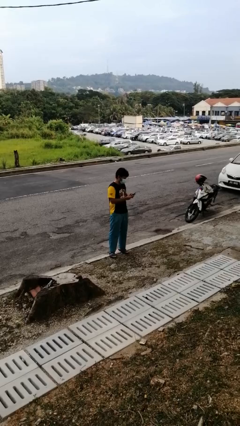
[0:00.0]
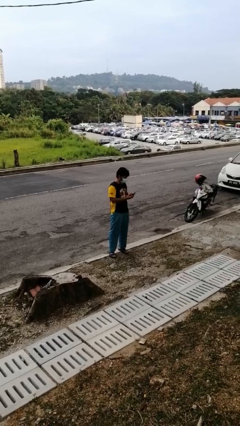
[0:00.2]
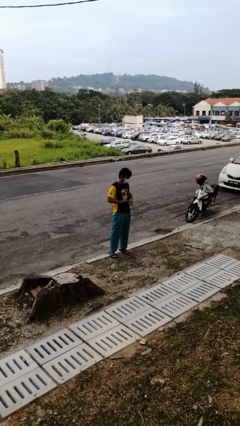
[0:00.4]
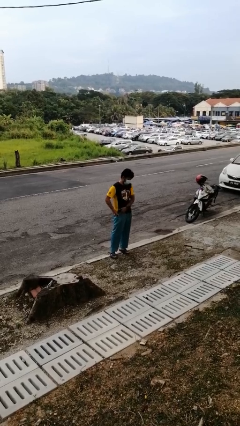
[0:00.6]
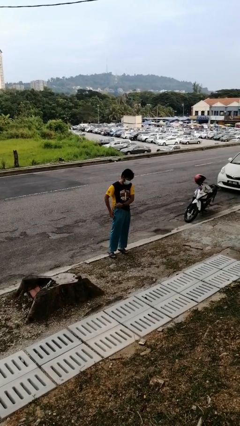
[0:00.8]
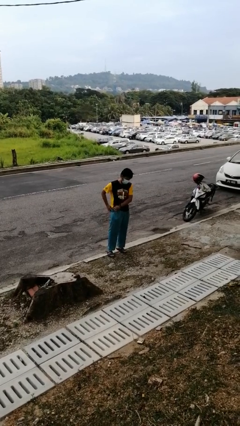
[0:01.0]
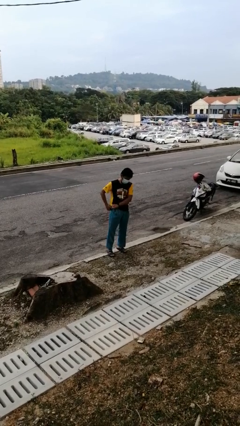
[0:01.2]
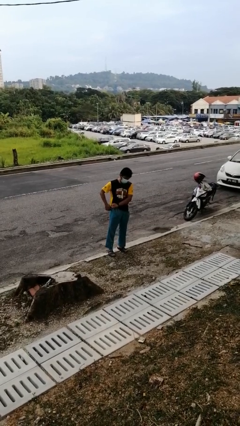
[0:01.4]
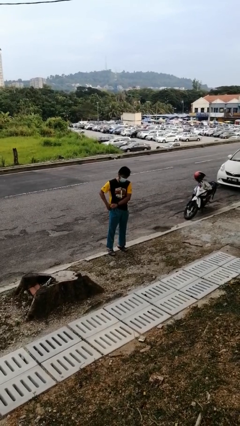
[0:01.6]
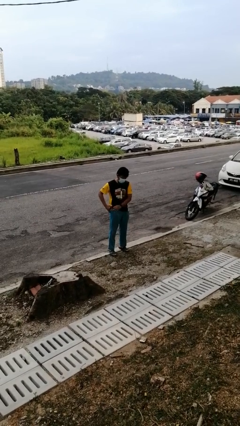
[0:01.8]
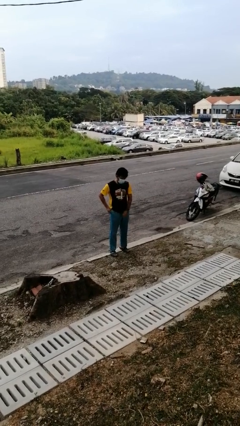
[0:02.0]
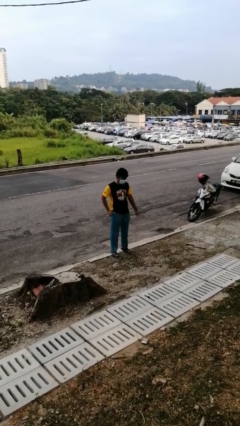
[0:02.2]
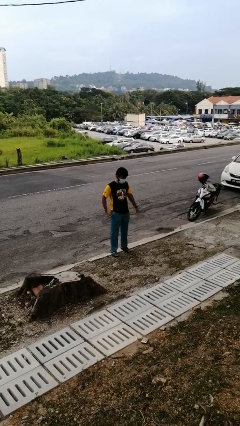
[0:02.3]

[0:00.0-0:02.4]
person puts phone into pocket

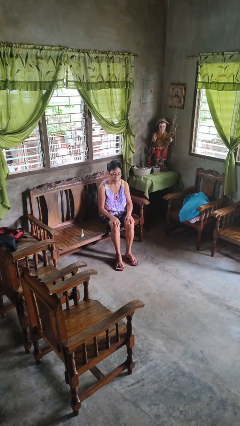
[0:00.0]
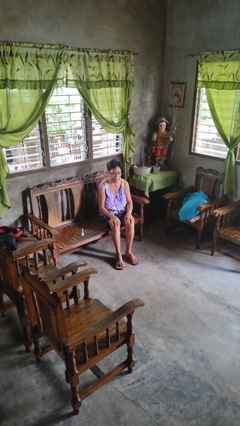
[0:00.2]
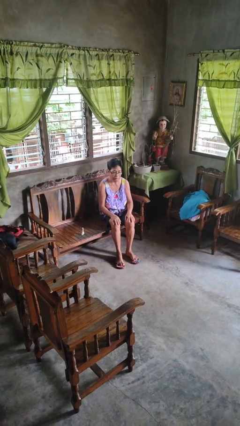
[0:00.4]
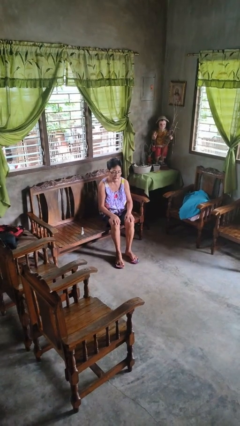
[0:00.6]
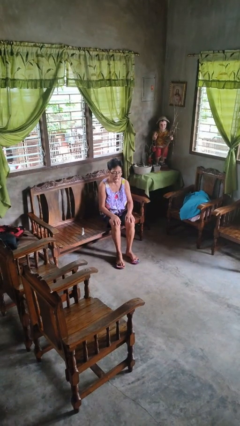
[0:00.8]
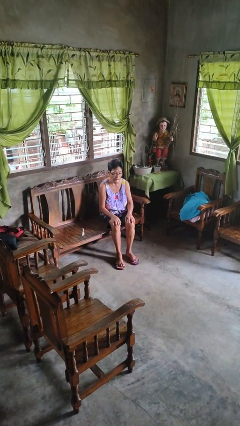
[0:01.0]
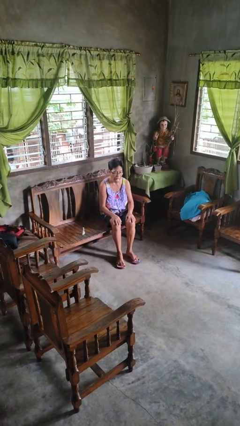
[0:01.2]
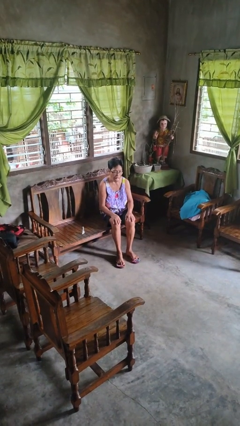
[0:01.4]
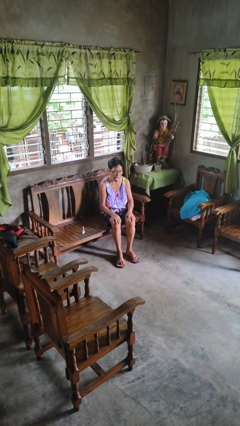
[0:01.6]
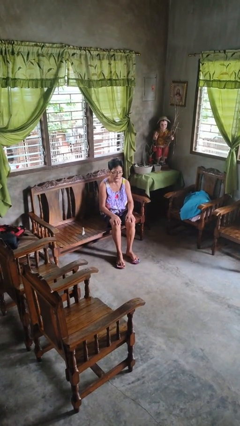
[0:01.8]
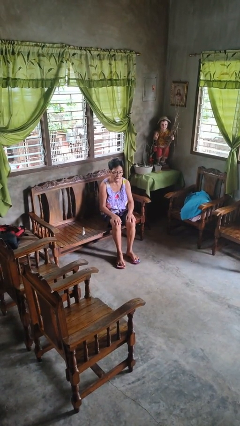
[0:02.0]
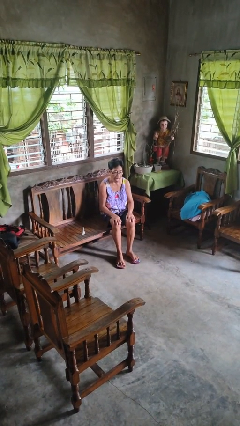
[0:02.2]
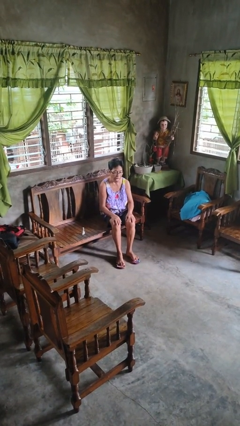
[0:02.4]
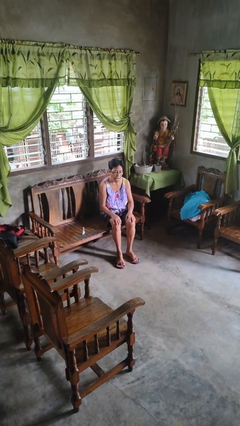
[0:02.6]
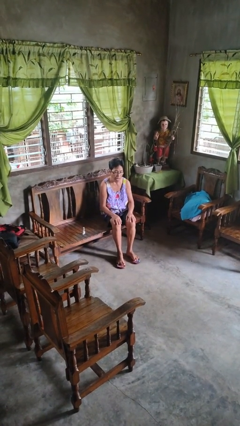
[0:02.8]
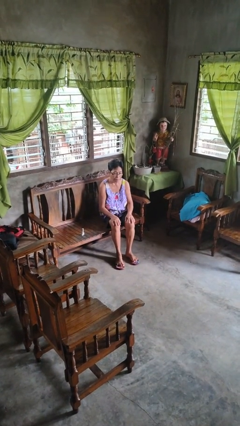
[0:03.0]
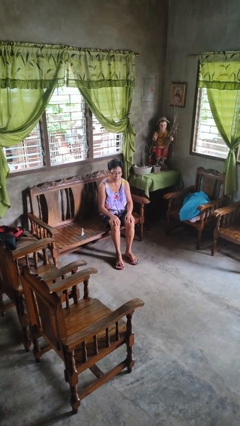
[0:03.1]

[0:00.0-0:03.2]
person sticks out tongue

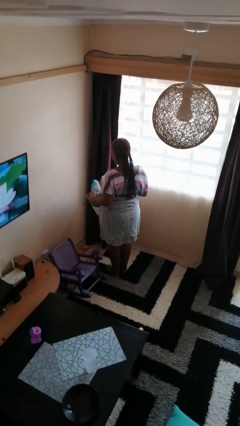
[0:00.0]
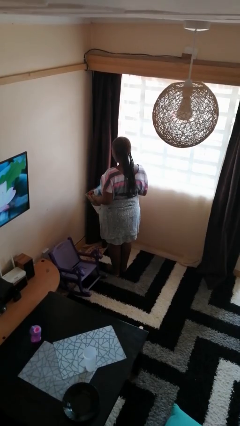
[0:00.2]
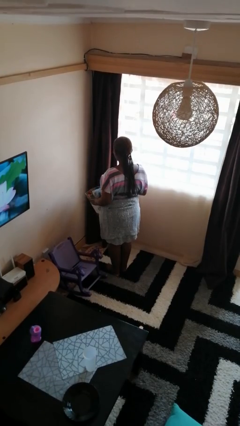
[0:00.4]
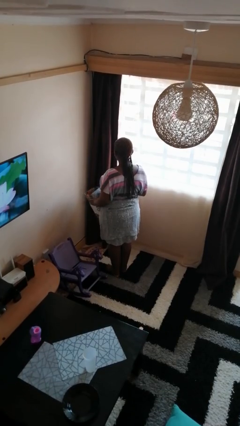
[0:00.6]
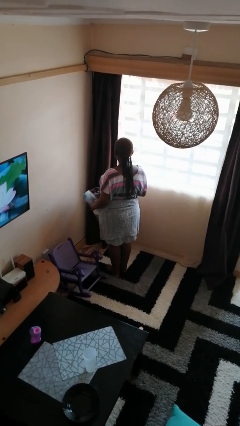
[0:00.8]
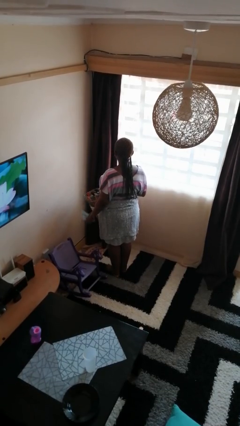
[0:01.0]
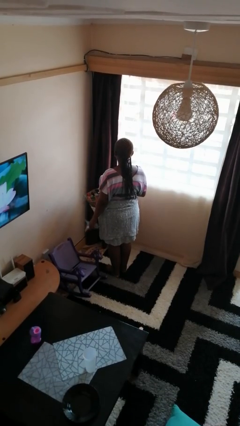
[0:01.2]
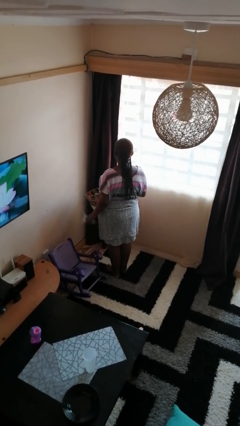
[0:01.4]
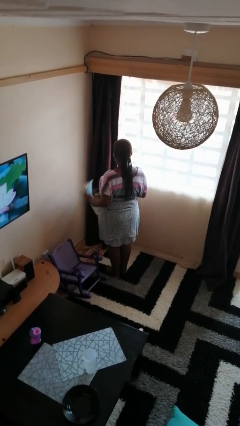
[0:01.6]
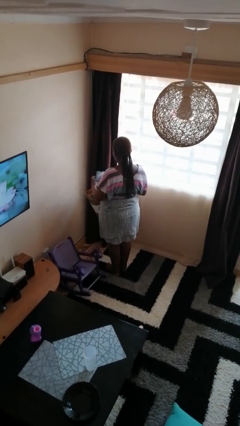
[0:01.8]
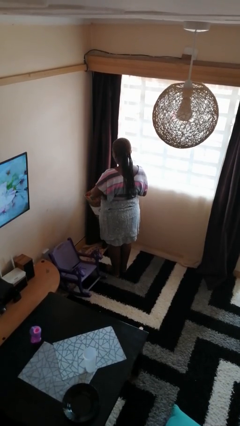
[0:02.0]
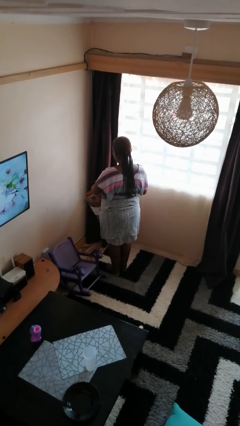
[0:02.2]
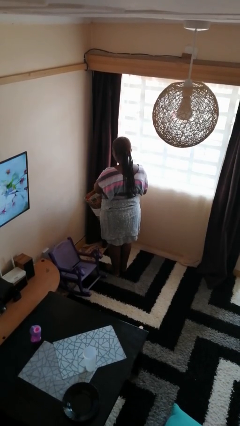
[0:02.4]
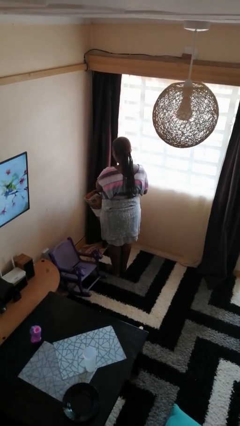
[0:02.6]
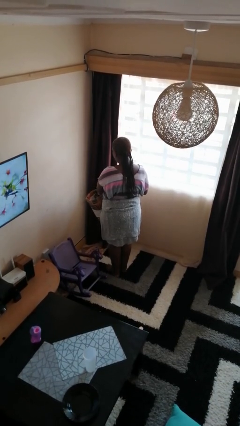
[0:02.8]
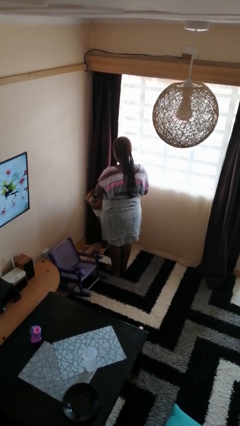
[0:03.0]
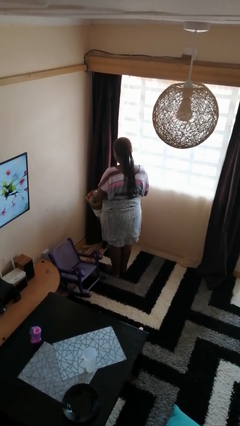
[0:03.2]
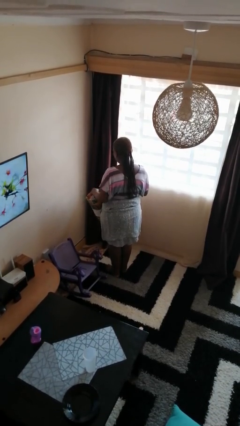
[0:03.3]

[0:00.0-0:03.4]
person puts object into bag

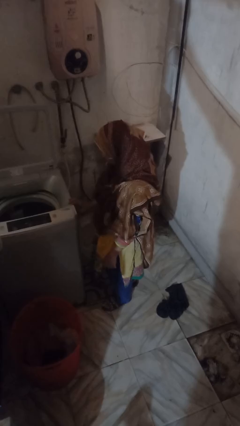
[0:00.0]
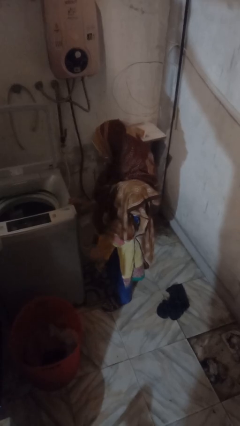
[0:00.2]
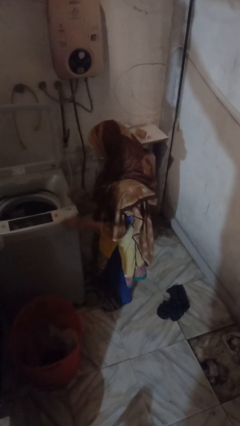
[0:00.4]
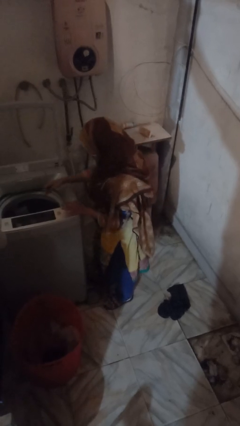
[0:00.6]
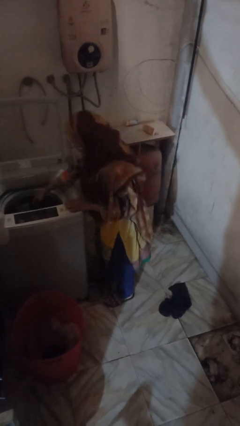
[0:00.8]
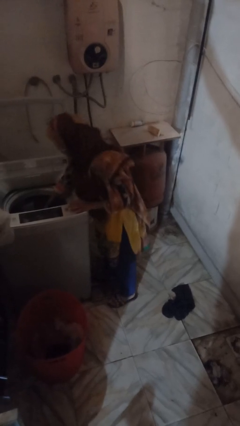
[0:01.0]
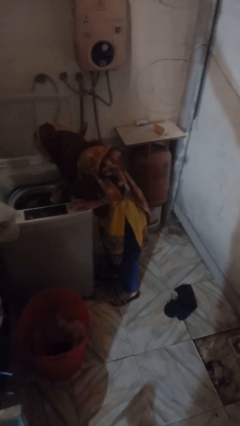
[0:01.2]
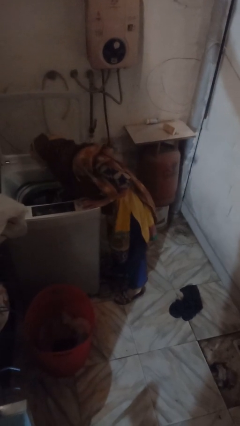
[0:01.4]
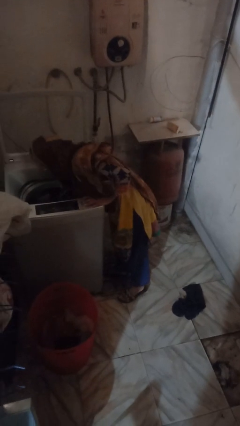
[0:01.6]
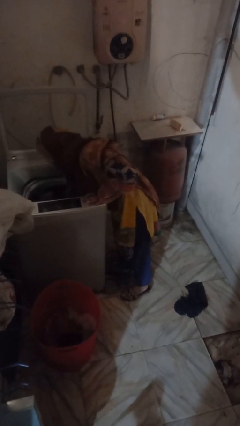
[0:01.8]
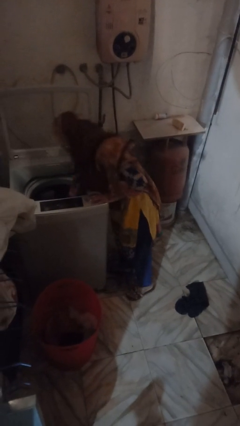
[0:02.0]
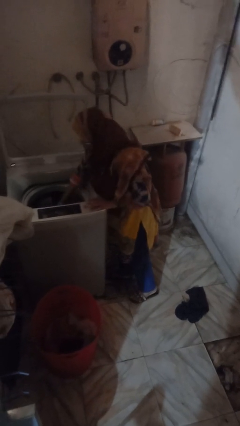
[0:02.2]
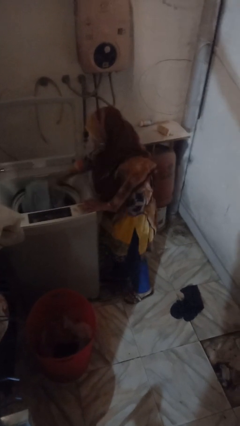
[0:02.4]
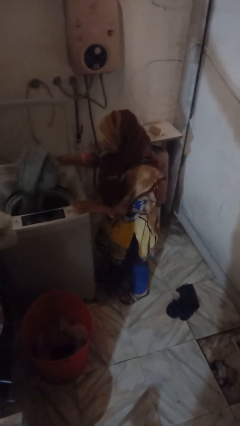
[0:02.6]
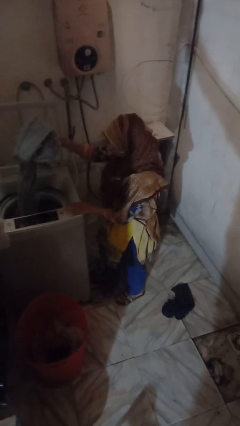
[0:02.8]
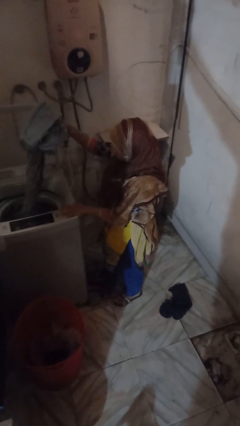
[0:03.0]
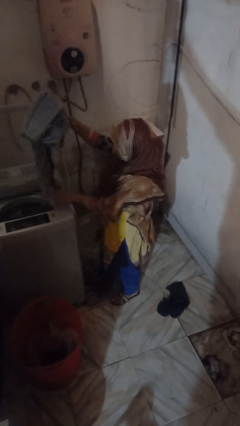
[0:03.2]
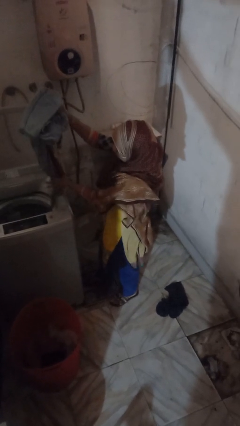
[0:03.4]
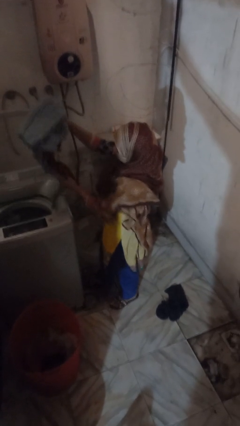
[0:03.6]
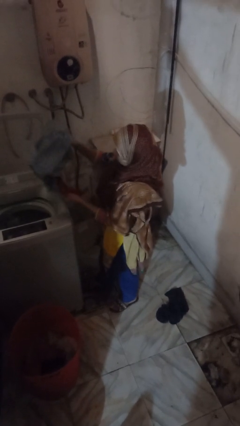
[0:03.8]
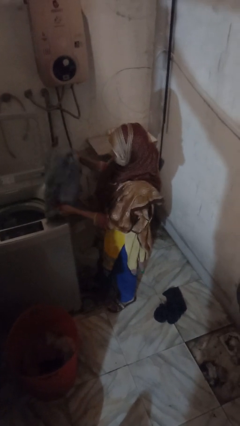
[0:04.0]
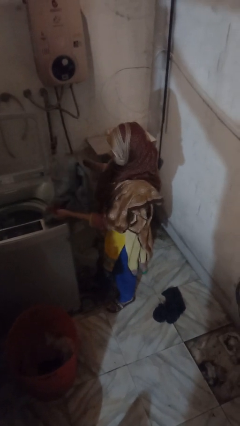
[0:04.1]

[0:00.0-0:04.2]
person unloads dryer

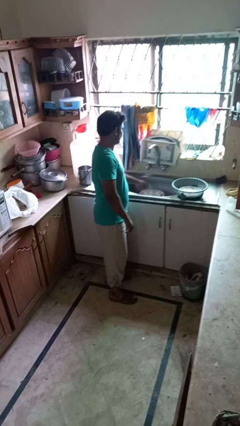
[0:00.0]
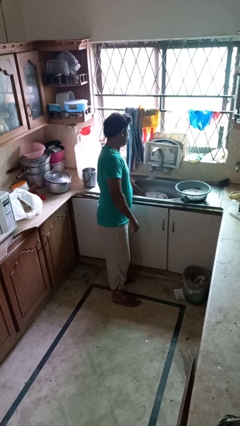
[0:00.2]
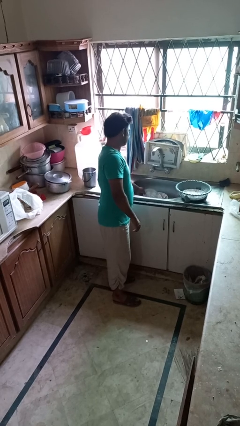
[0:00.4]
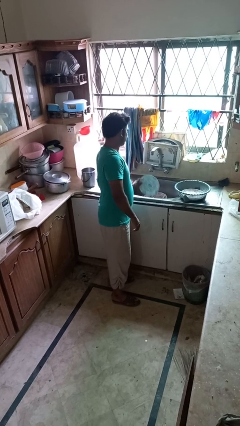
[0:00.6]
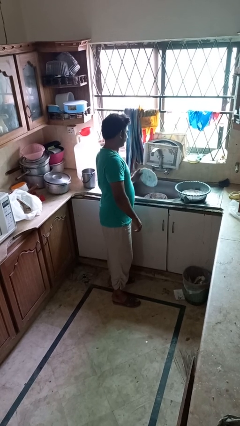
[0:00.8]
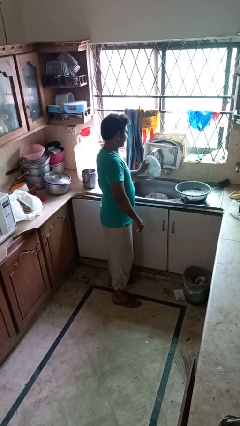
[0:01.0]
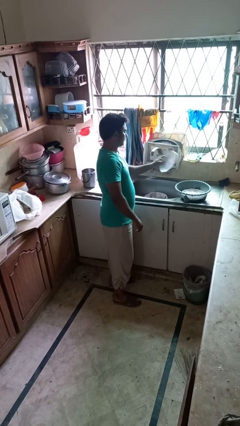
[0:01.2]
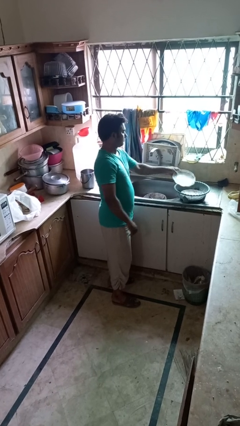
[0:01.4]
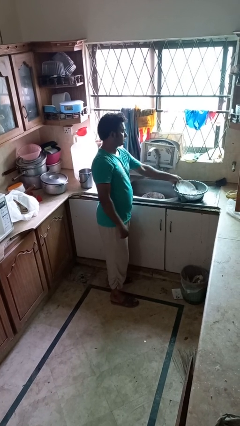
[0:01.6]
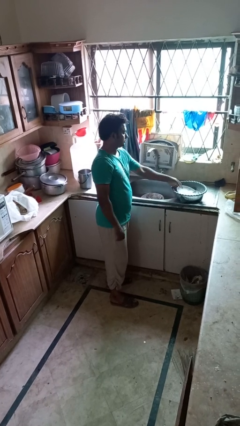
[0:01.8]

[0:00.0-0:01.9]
person loads dishwasher

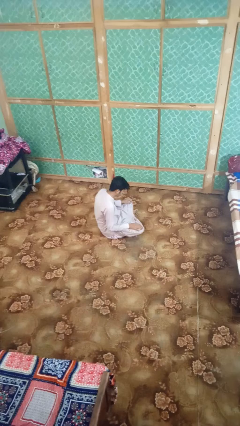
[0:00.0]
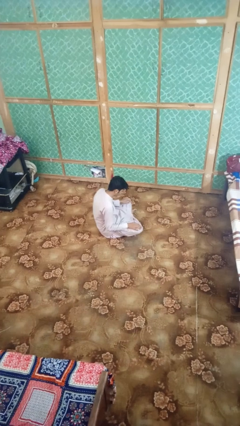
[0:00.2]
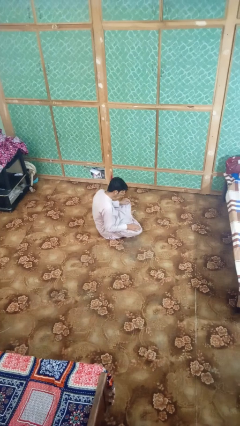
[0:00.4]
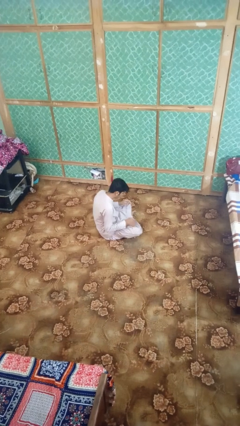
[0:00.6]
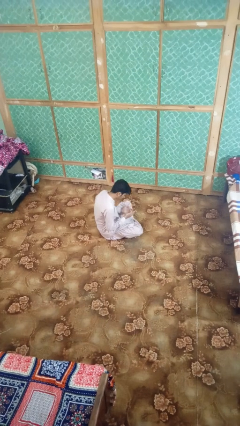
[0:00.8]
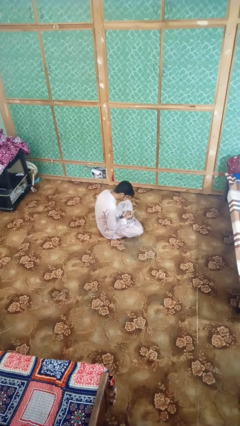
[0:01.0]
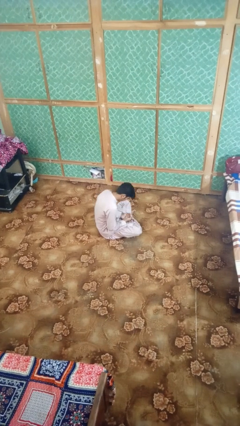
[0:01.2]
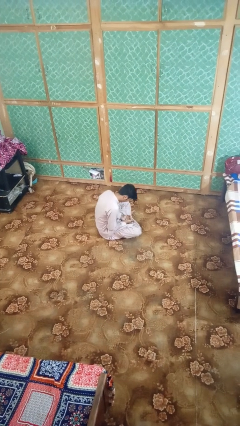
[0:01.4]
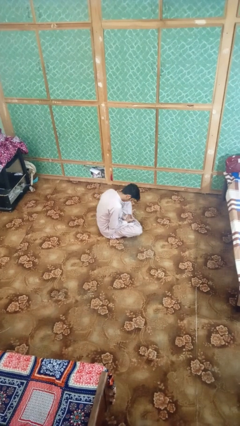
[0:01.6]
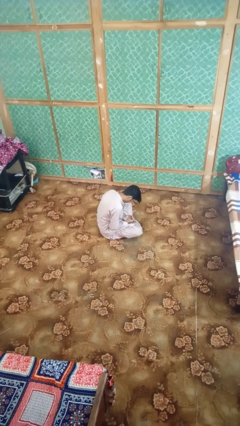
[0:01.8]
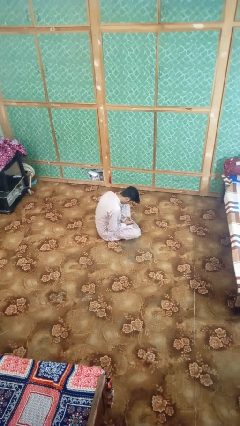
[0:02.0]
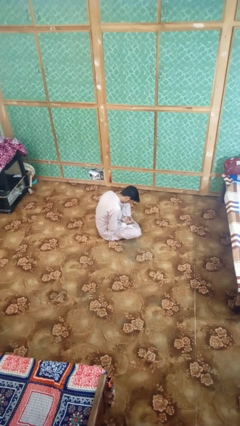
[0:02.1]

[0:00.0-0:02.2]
person looks at hands in lap

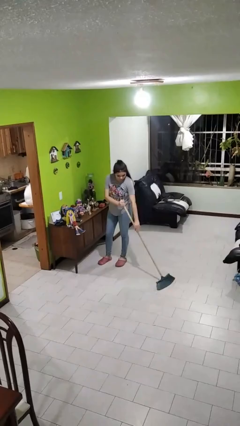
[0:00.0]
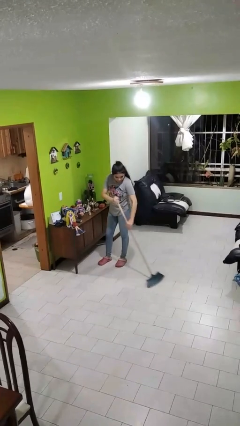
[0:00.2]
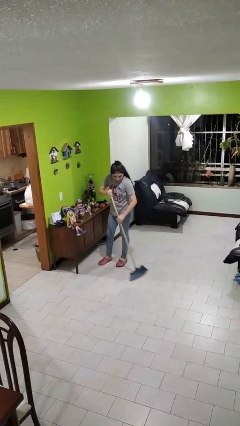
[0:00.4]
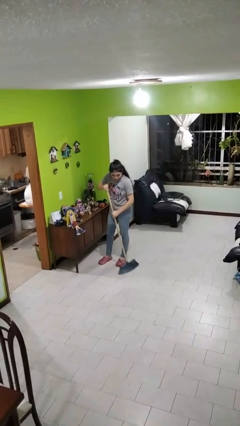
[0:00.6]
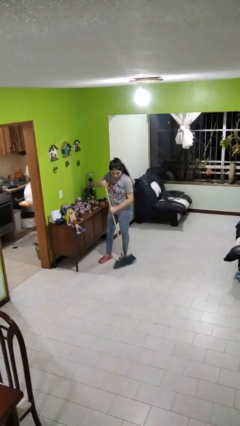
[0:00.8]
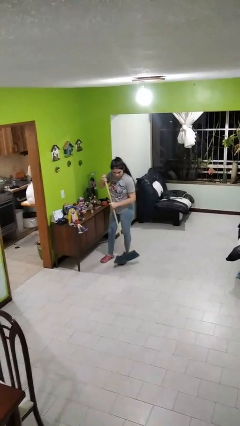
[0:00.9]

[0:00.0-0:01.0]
person sweeps floor
